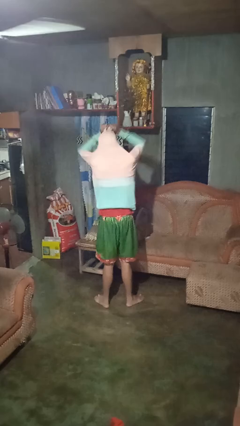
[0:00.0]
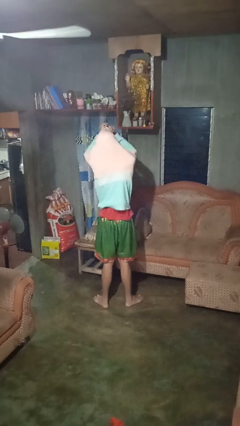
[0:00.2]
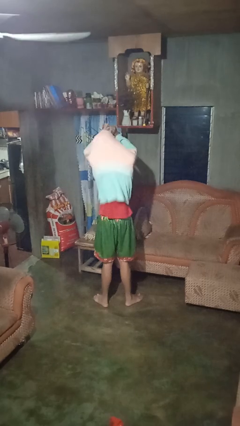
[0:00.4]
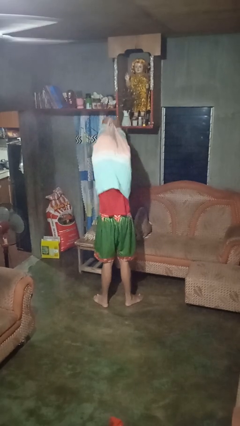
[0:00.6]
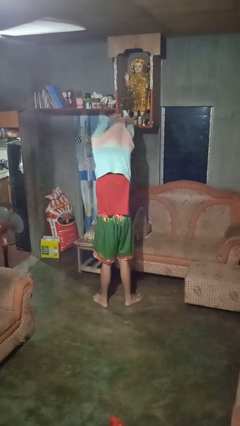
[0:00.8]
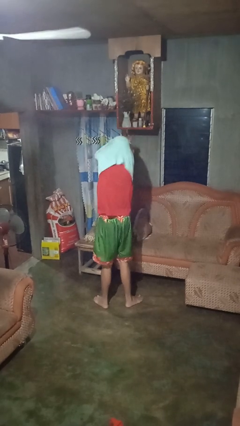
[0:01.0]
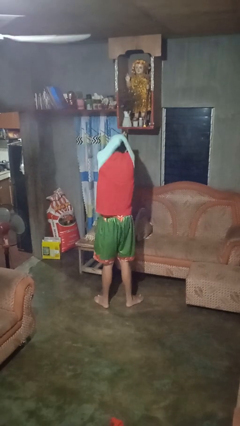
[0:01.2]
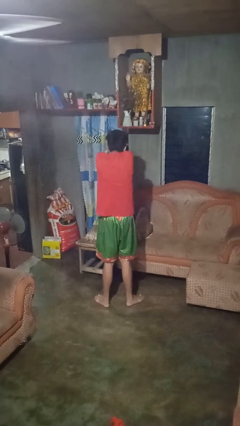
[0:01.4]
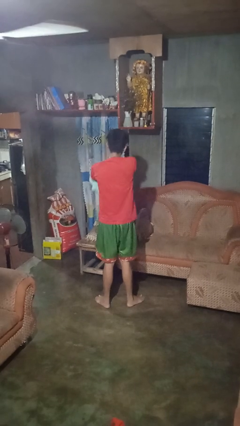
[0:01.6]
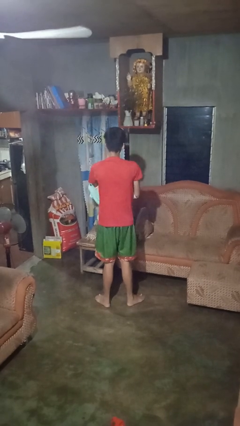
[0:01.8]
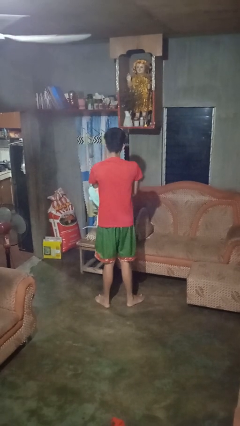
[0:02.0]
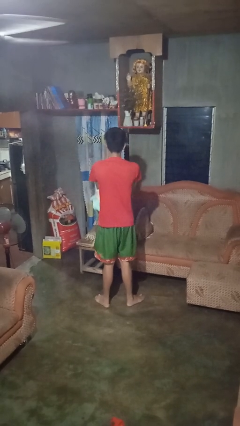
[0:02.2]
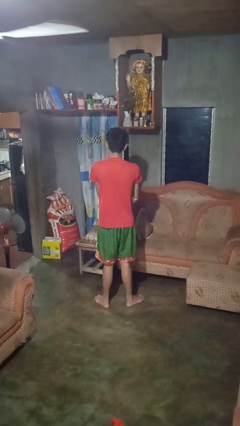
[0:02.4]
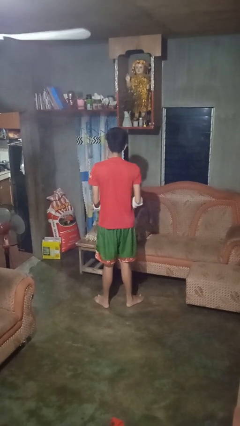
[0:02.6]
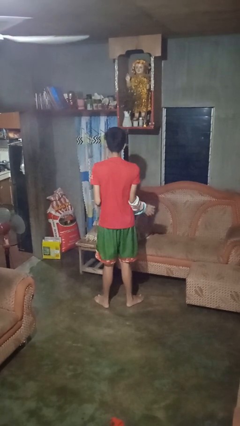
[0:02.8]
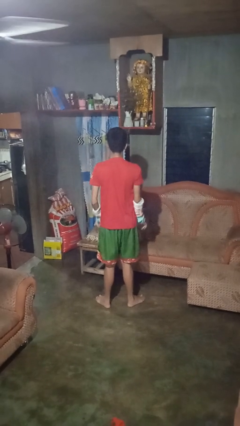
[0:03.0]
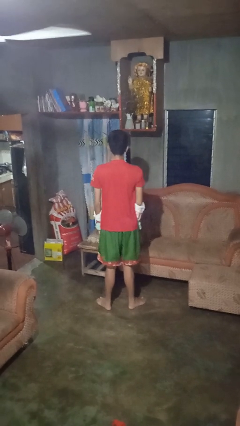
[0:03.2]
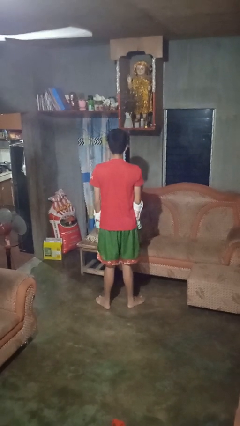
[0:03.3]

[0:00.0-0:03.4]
person takes off hoodie

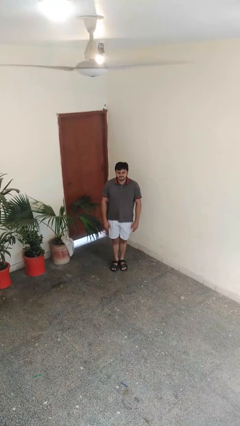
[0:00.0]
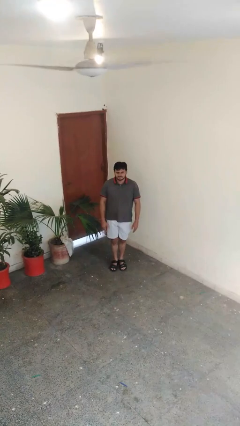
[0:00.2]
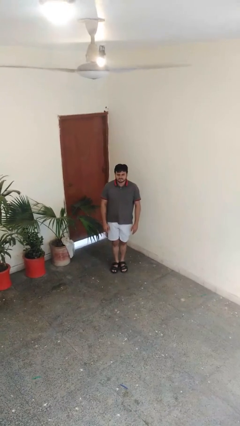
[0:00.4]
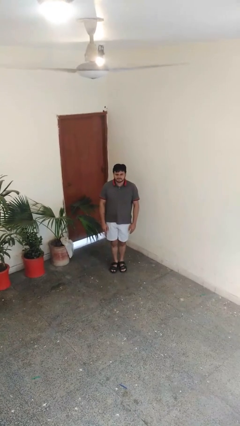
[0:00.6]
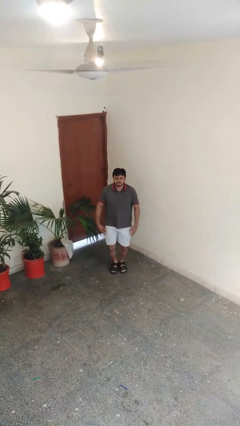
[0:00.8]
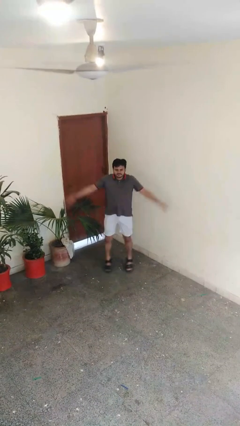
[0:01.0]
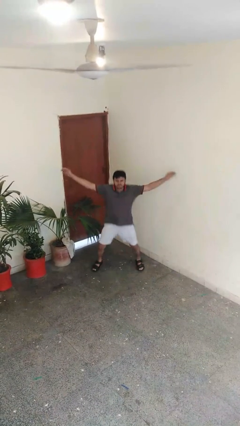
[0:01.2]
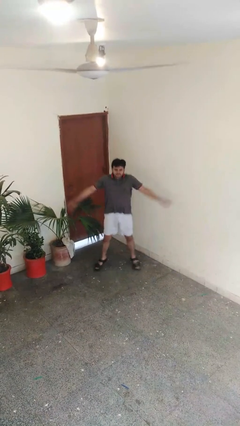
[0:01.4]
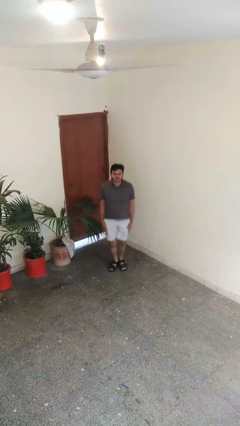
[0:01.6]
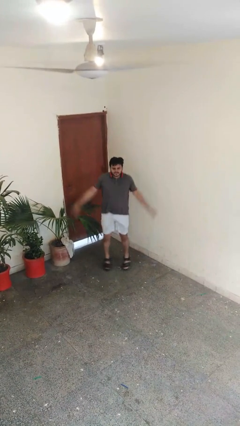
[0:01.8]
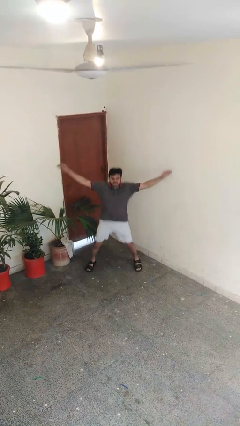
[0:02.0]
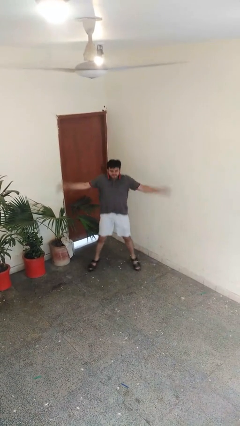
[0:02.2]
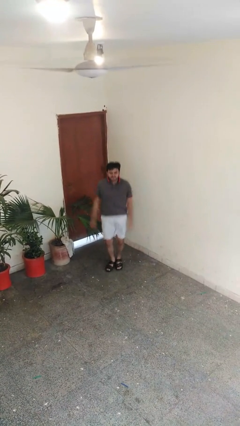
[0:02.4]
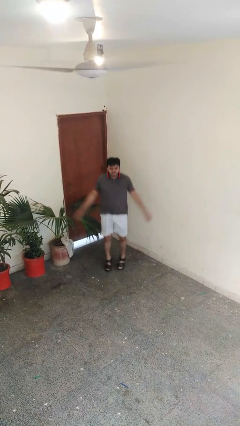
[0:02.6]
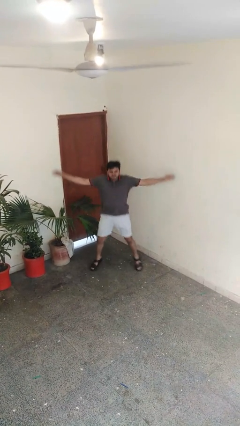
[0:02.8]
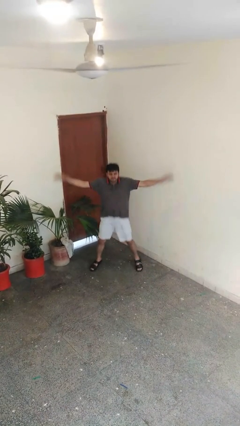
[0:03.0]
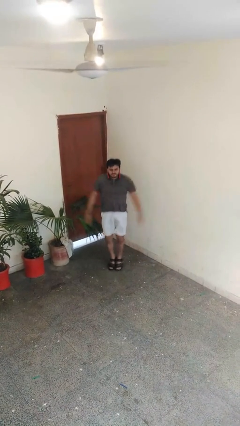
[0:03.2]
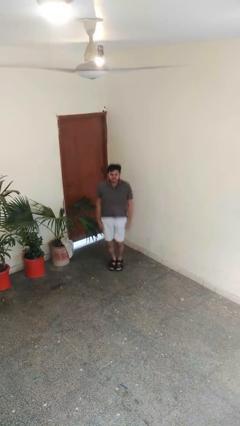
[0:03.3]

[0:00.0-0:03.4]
person exercises with jumping jacks

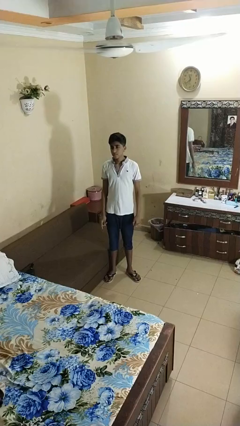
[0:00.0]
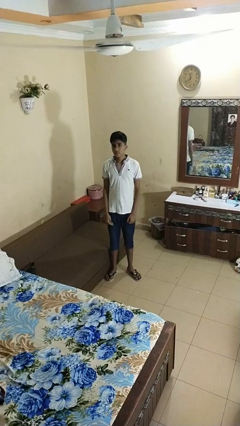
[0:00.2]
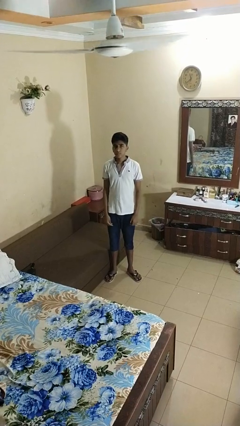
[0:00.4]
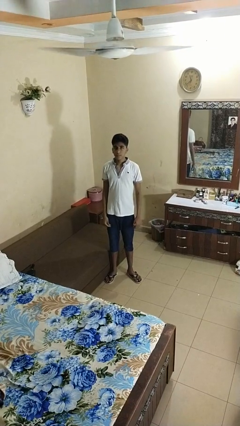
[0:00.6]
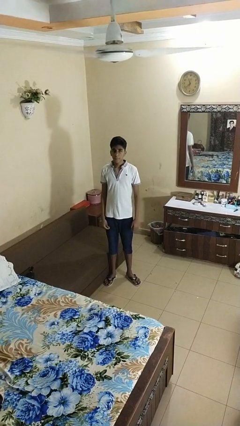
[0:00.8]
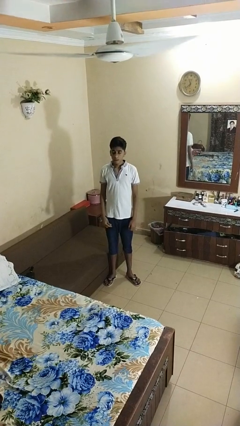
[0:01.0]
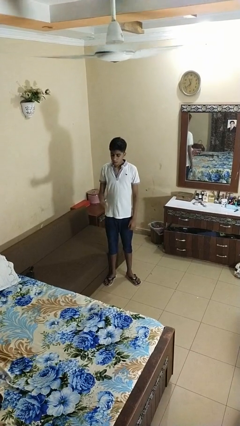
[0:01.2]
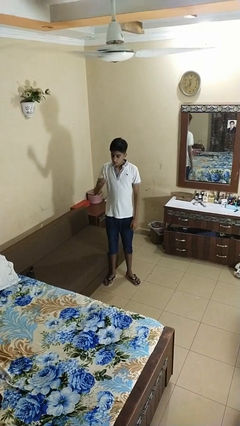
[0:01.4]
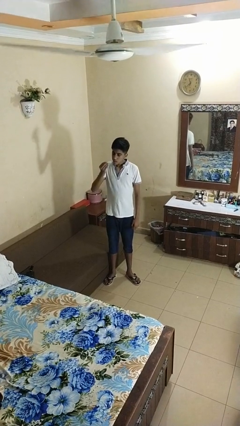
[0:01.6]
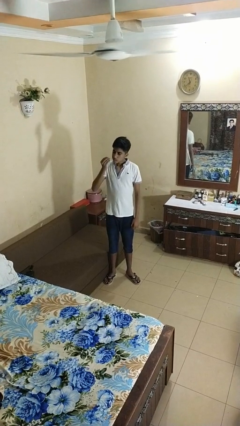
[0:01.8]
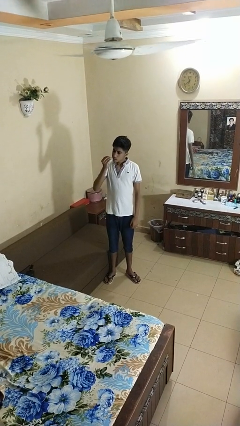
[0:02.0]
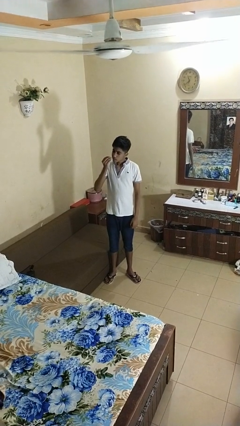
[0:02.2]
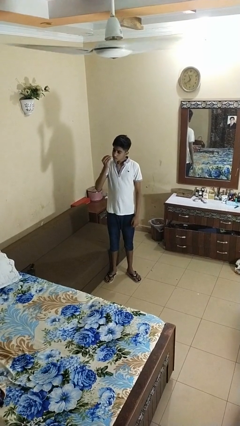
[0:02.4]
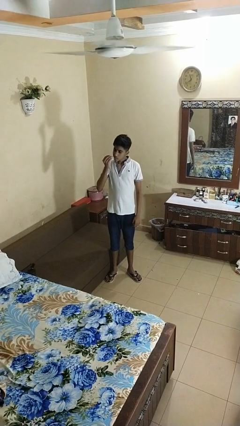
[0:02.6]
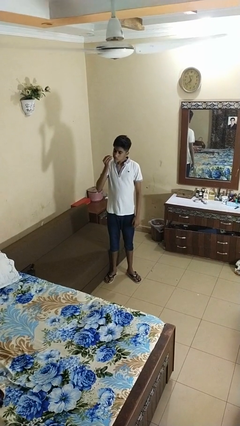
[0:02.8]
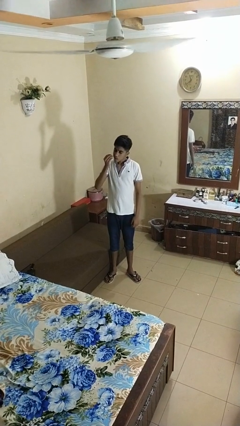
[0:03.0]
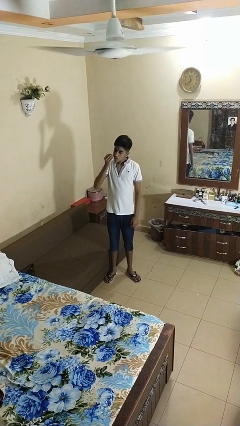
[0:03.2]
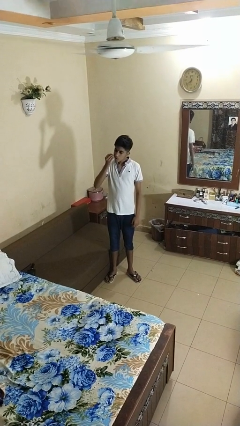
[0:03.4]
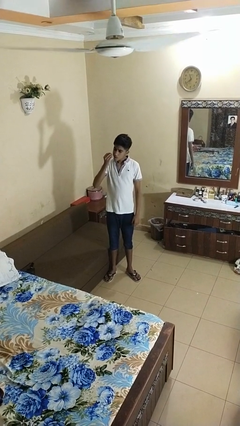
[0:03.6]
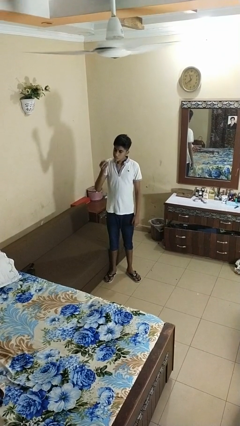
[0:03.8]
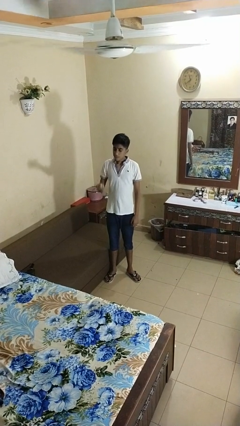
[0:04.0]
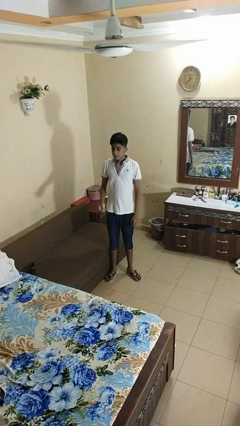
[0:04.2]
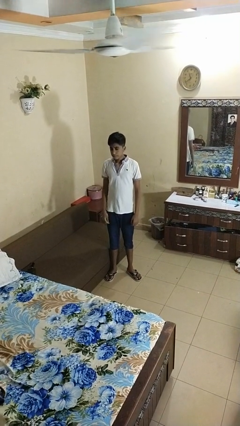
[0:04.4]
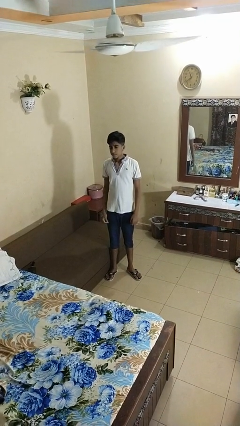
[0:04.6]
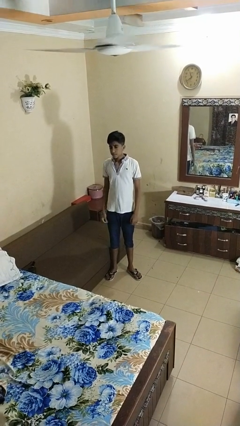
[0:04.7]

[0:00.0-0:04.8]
person flosses

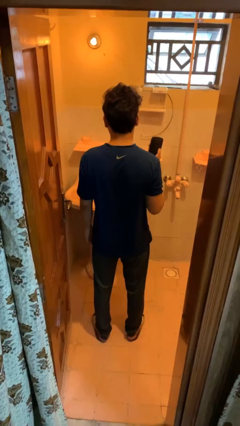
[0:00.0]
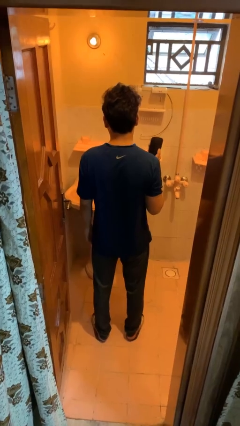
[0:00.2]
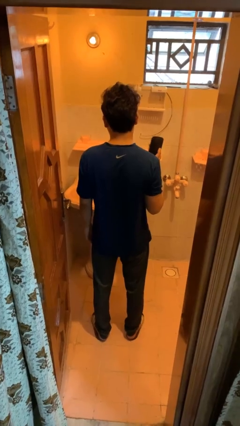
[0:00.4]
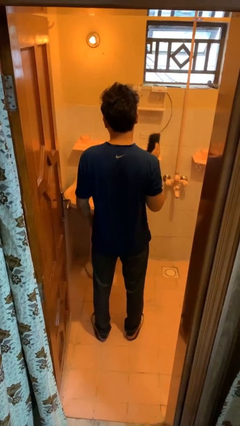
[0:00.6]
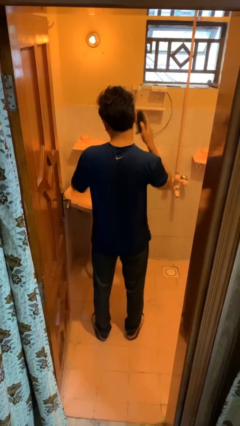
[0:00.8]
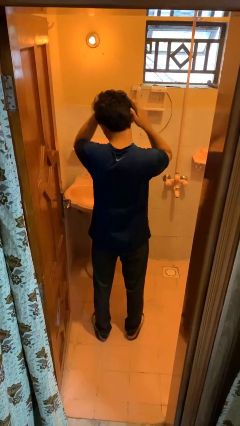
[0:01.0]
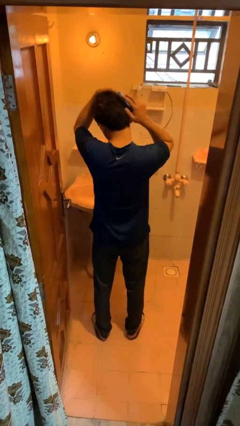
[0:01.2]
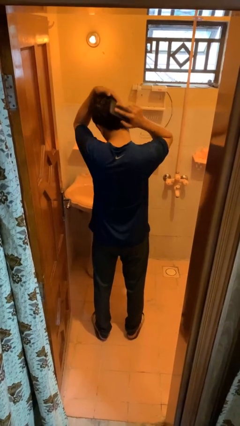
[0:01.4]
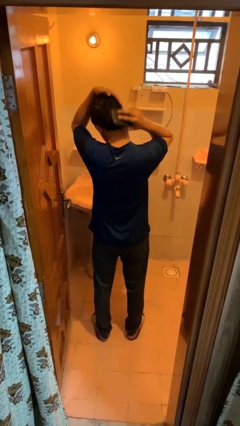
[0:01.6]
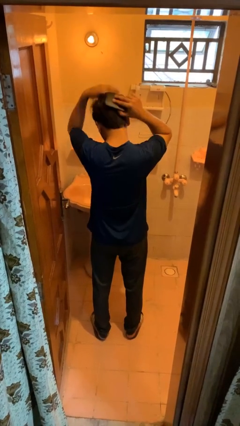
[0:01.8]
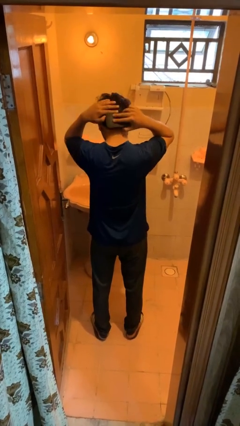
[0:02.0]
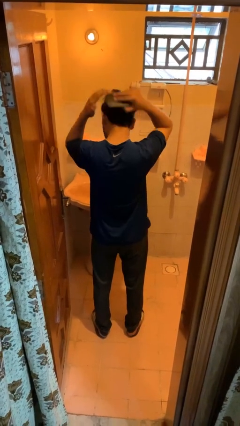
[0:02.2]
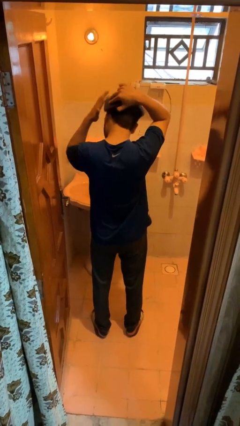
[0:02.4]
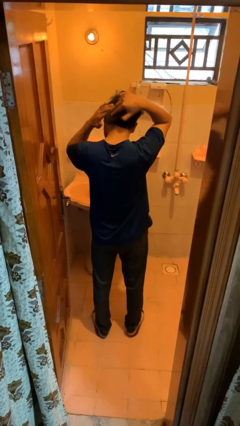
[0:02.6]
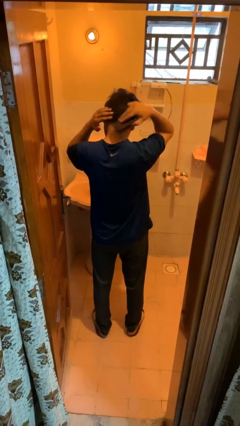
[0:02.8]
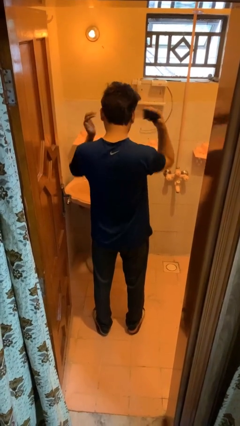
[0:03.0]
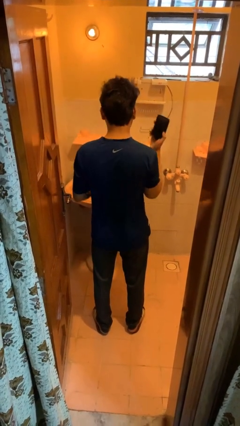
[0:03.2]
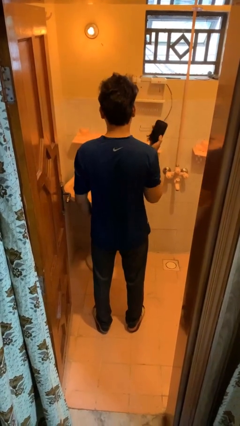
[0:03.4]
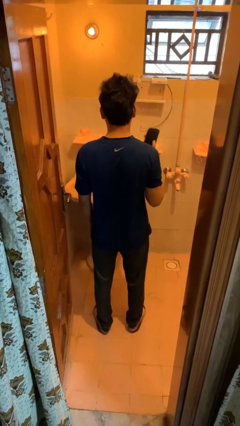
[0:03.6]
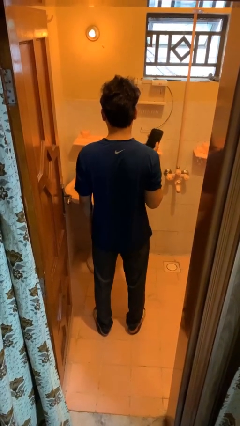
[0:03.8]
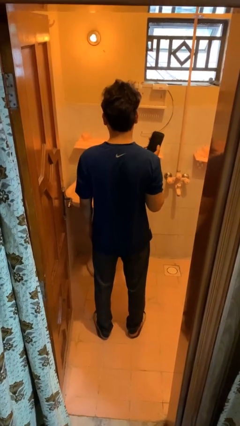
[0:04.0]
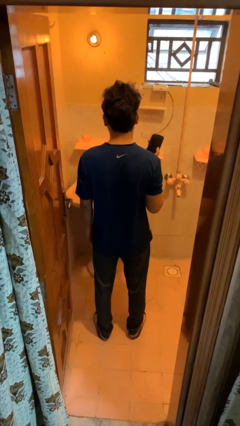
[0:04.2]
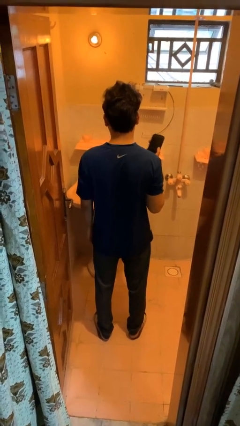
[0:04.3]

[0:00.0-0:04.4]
person brushes hair

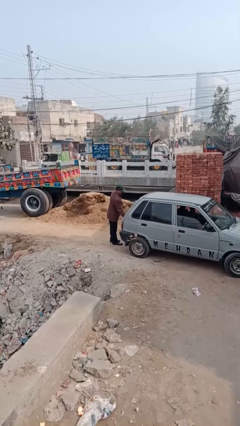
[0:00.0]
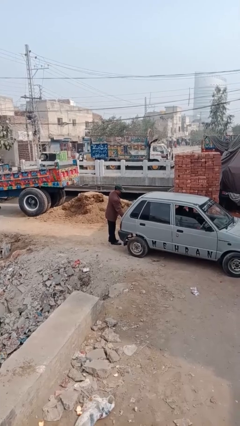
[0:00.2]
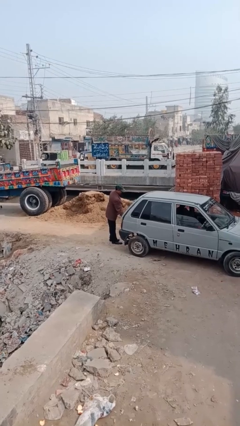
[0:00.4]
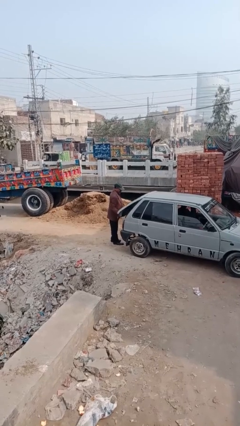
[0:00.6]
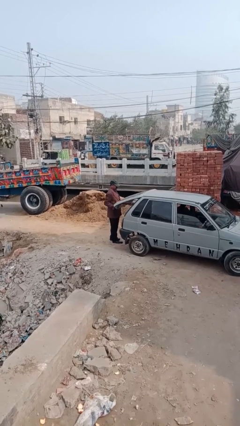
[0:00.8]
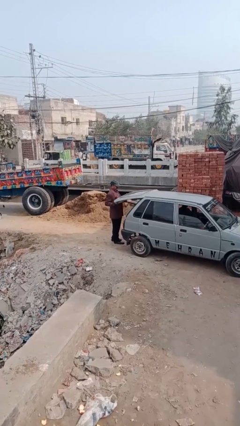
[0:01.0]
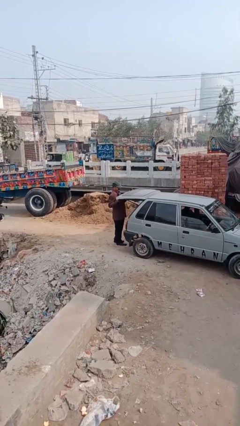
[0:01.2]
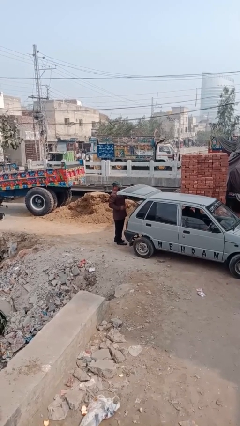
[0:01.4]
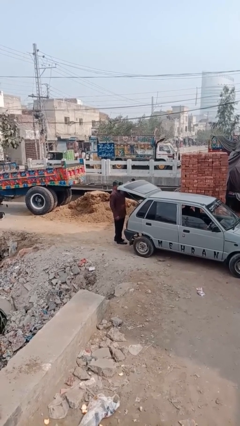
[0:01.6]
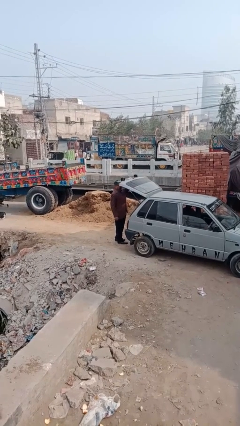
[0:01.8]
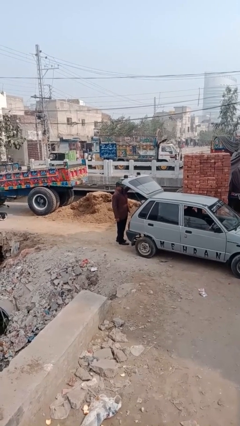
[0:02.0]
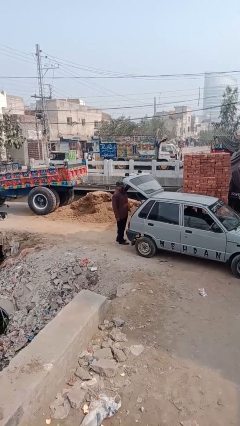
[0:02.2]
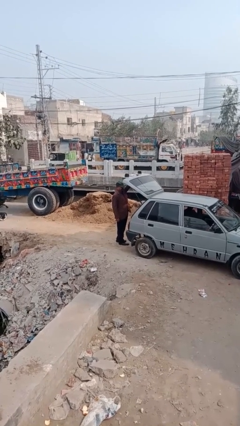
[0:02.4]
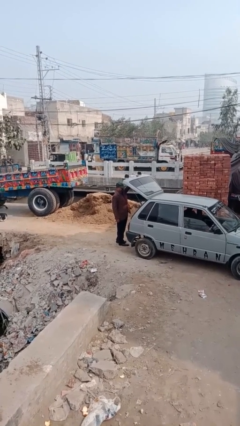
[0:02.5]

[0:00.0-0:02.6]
person opens car trunk
